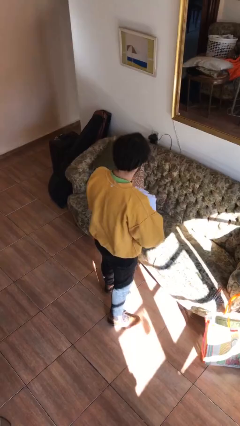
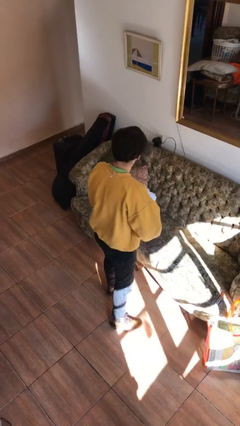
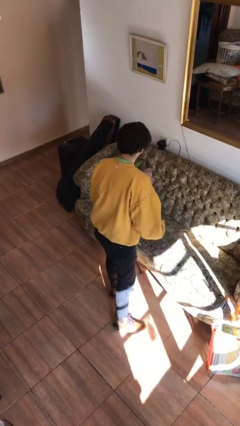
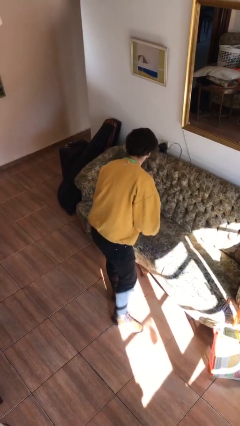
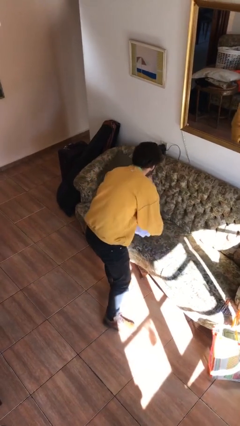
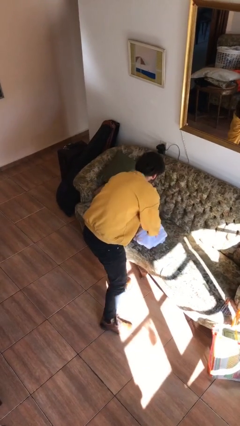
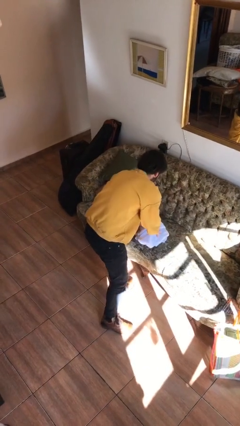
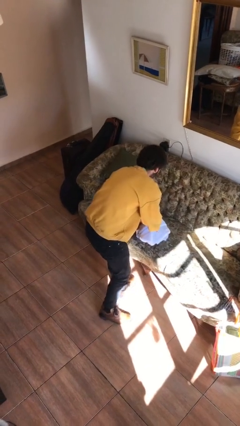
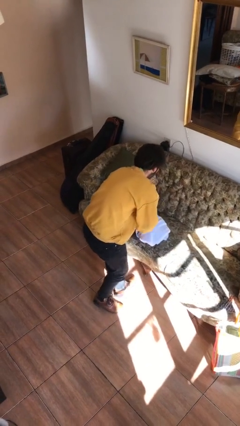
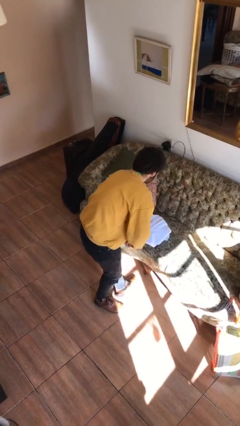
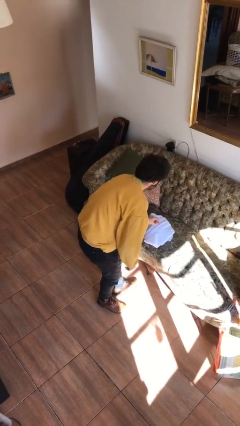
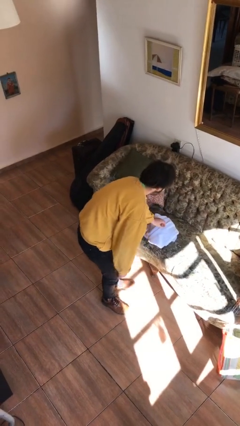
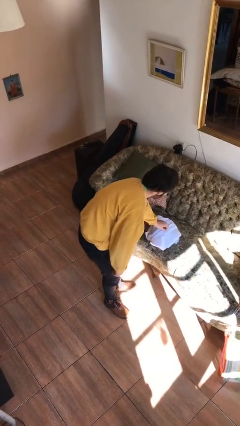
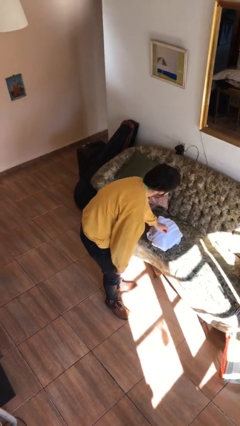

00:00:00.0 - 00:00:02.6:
person puts down object on couch

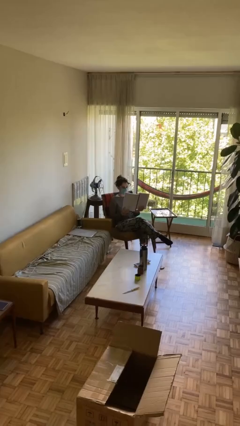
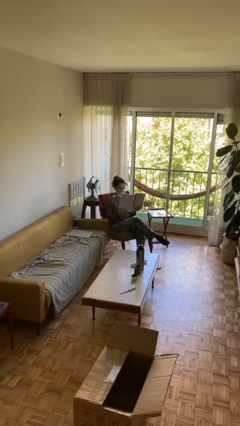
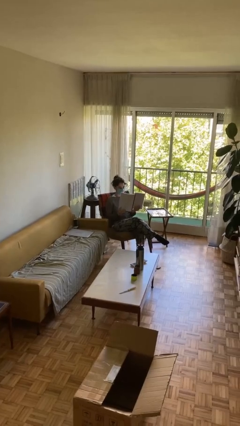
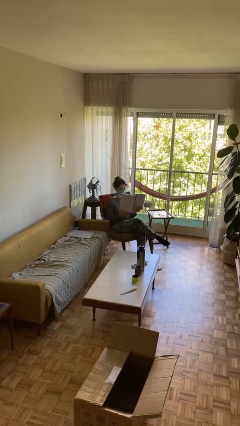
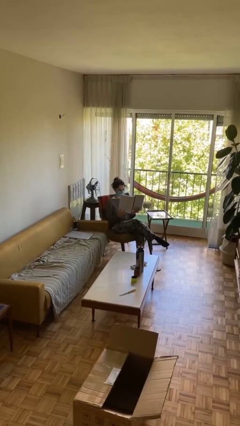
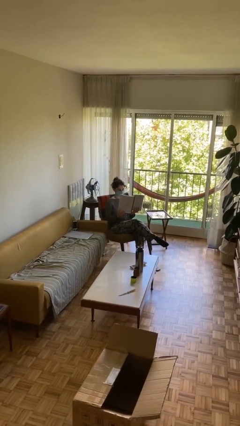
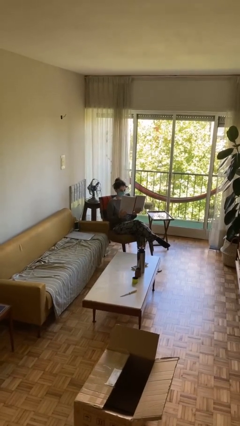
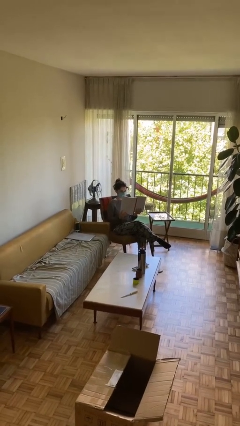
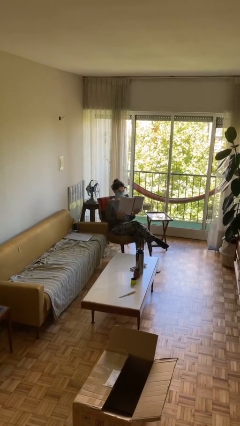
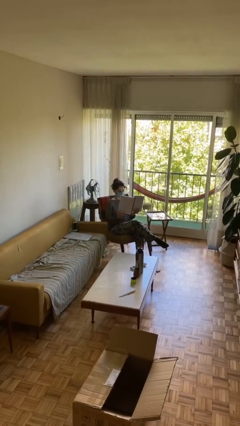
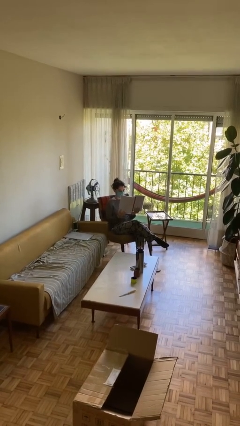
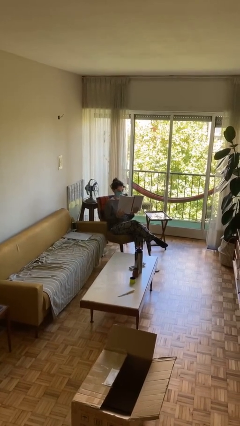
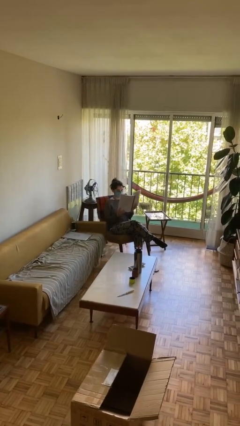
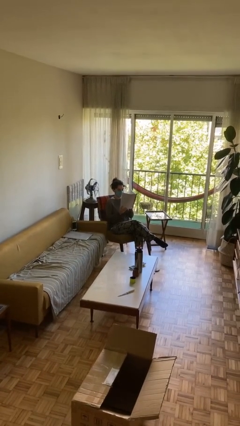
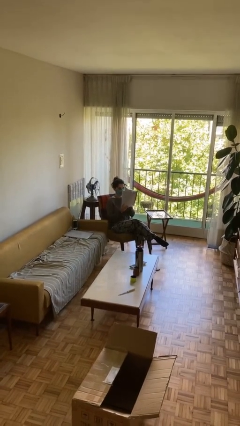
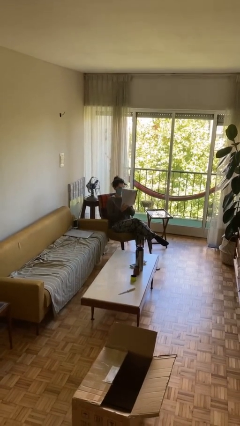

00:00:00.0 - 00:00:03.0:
person reads document

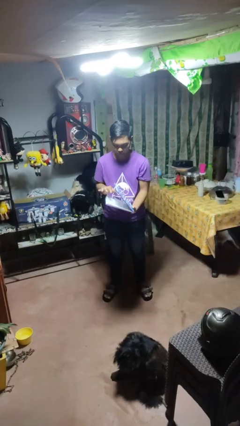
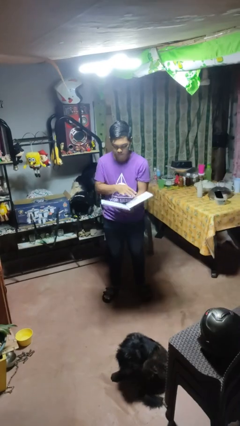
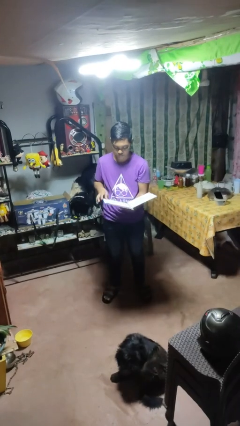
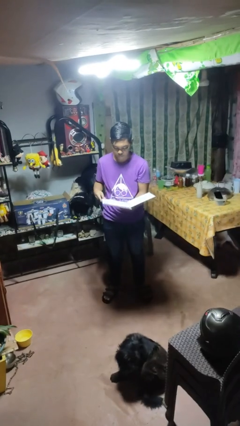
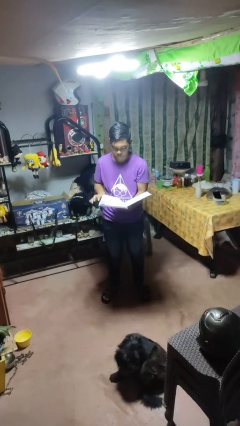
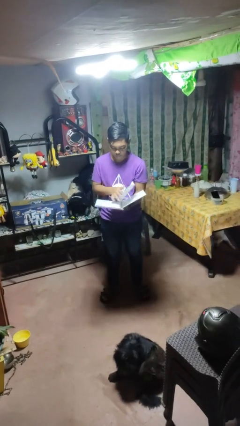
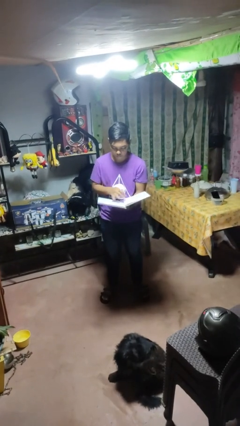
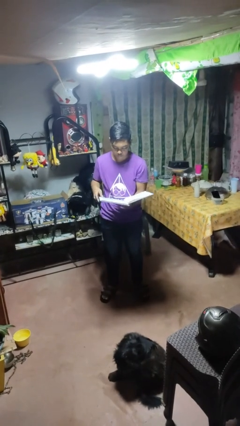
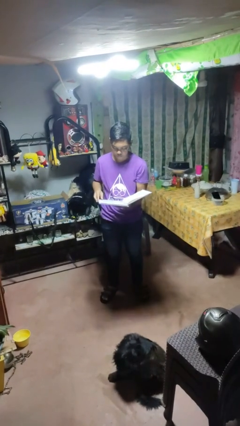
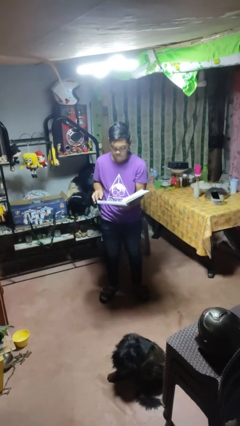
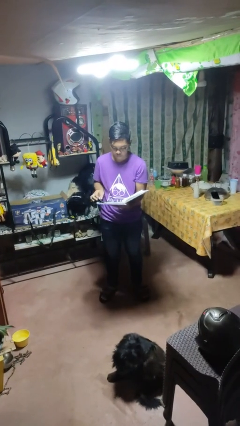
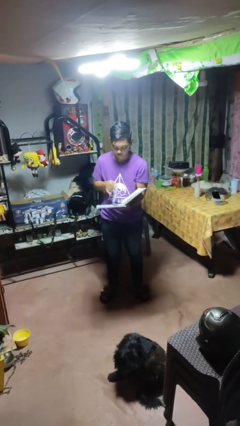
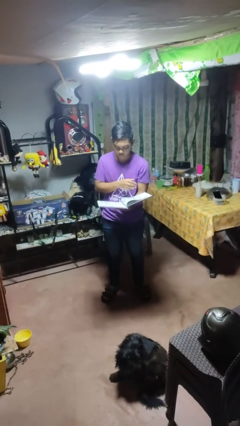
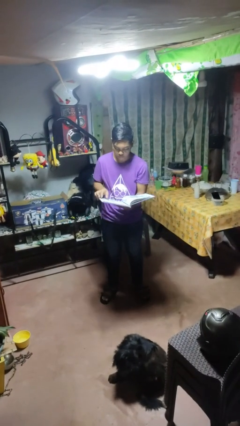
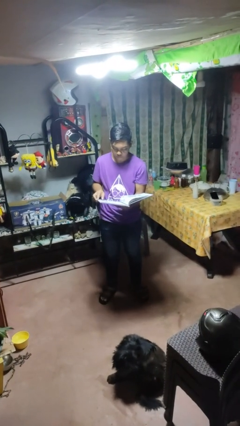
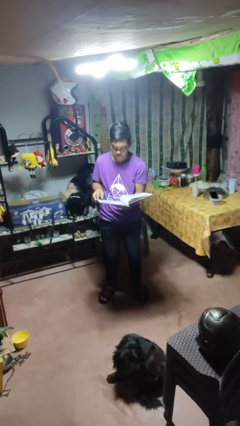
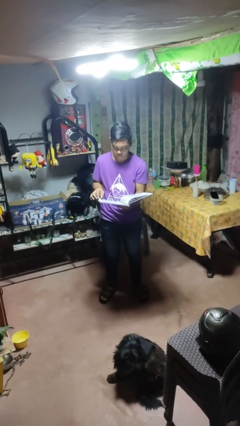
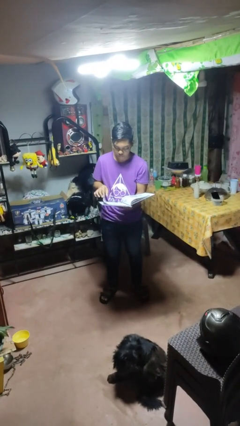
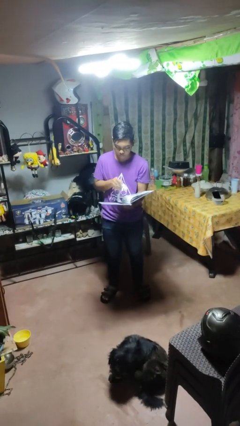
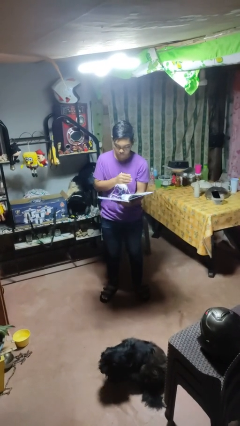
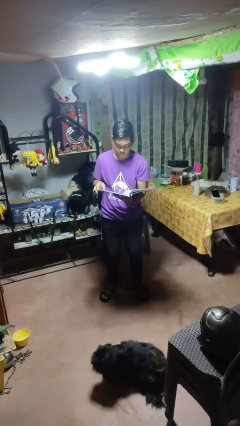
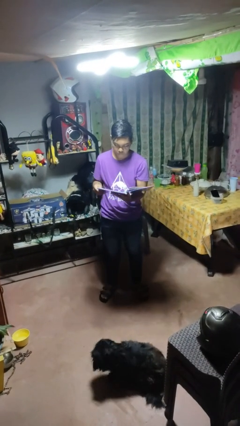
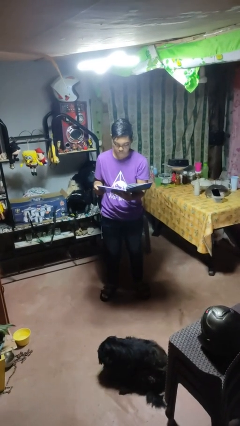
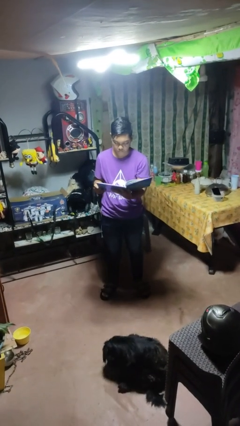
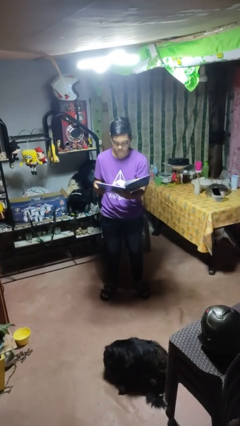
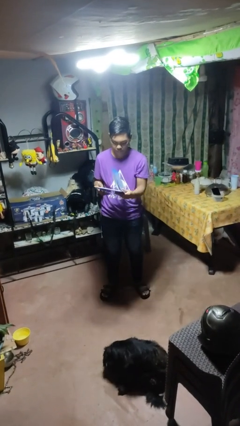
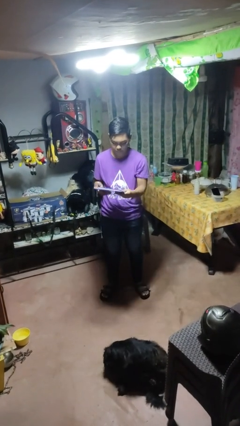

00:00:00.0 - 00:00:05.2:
person reads magazine

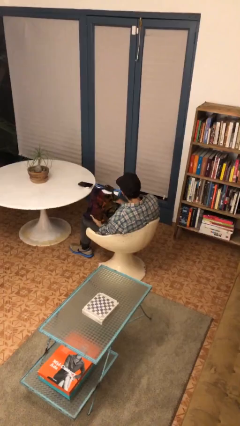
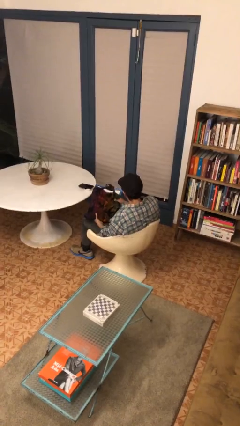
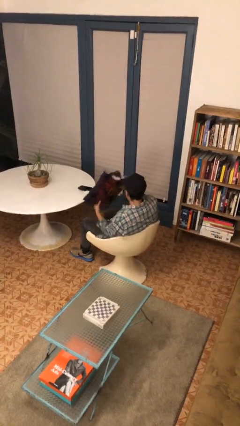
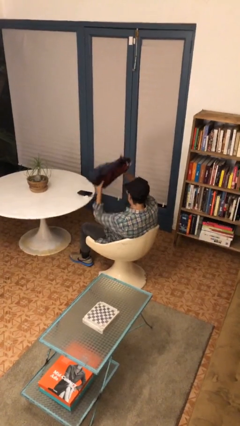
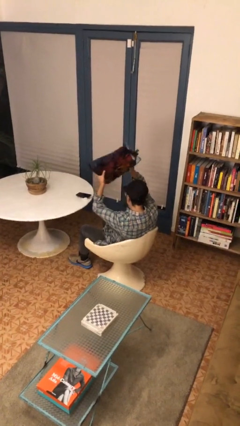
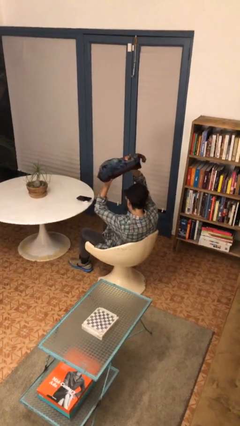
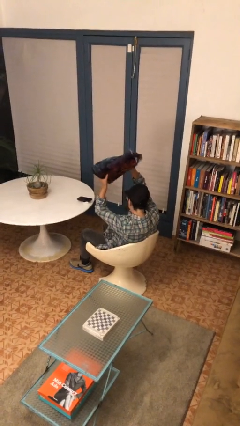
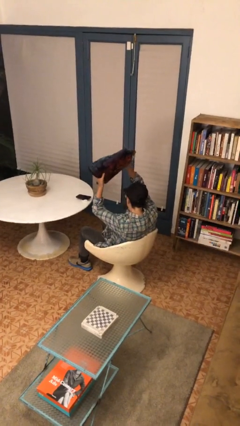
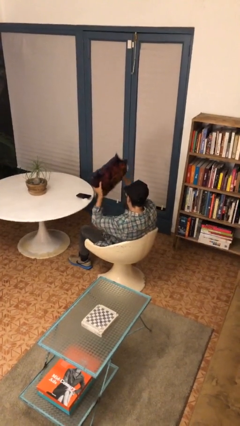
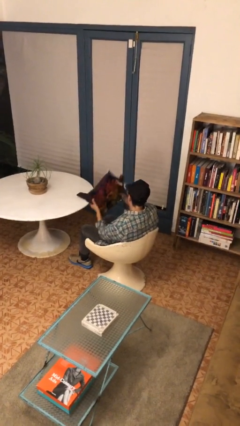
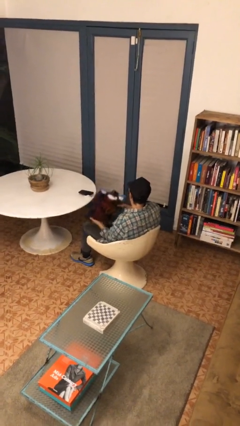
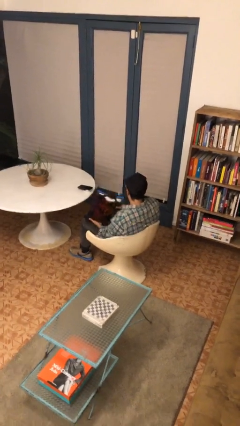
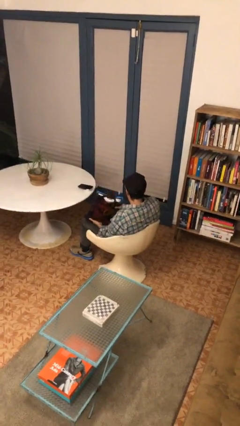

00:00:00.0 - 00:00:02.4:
person holds object above head

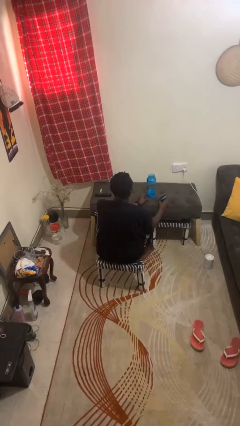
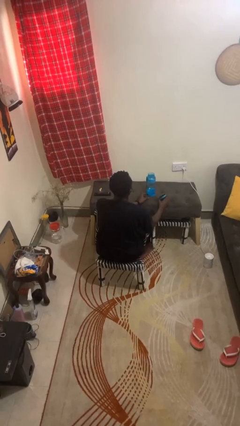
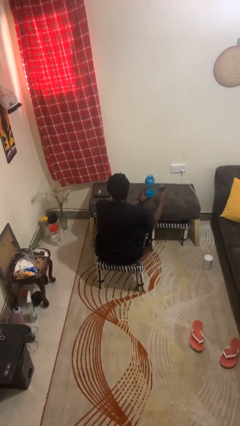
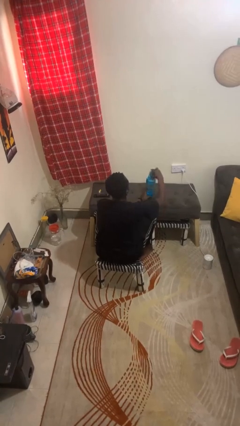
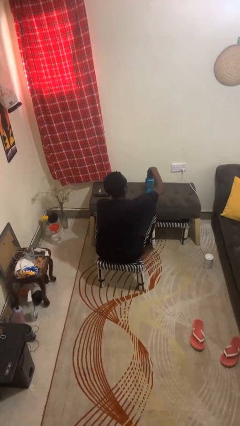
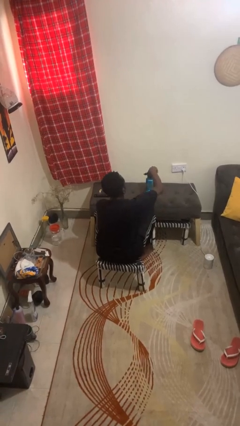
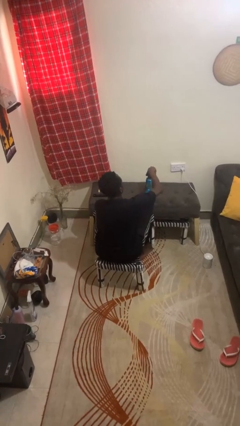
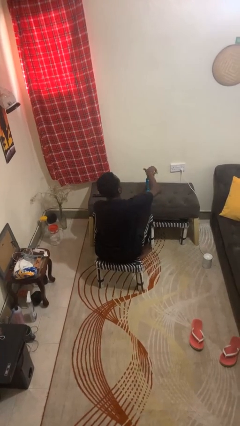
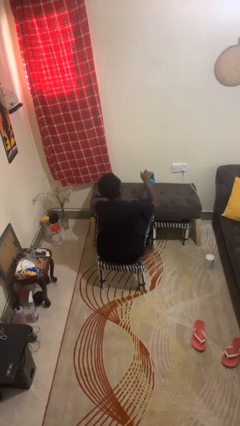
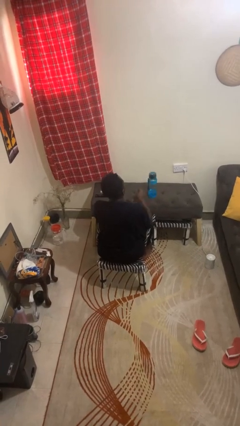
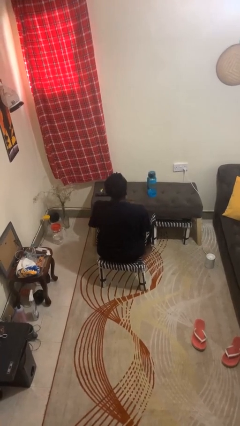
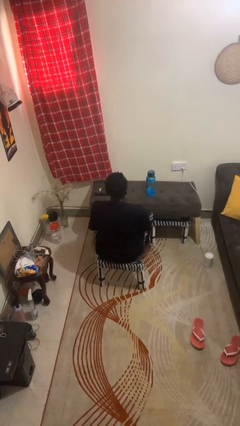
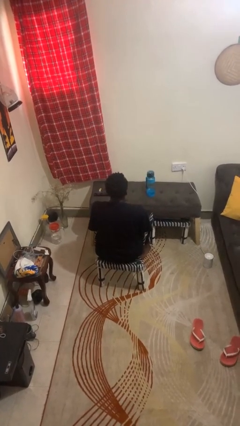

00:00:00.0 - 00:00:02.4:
person closes jar

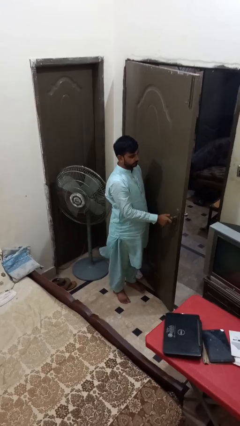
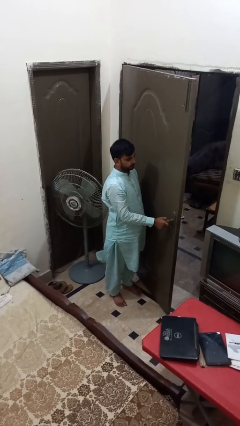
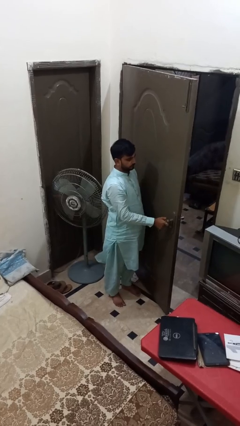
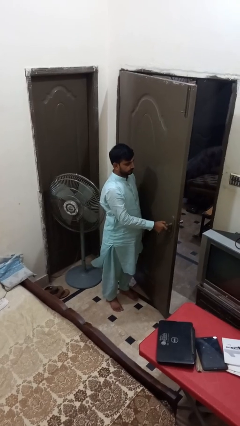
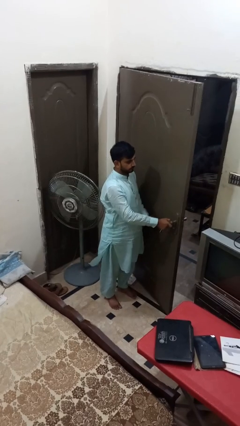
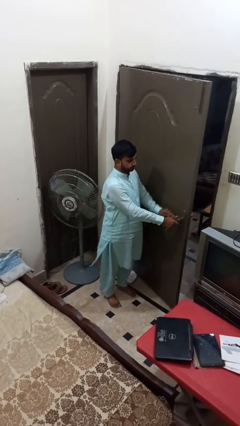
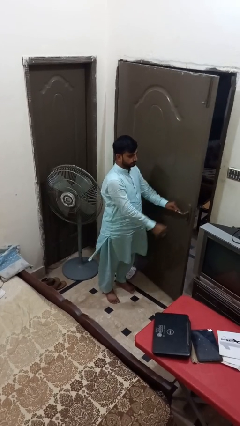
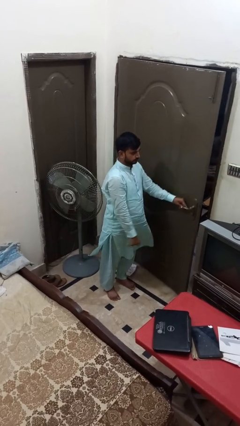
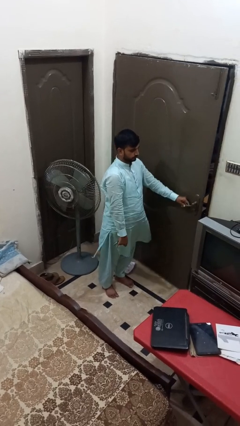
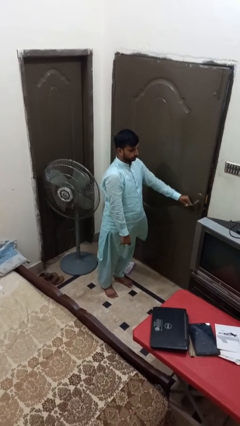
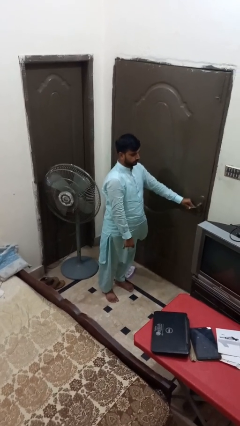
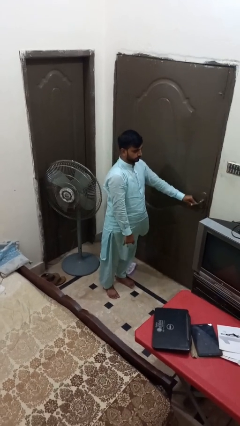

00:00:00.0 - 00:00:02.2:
person closes facility door
